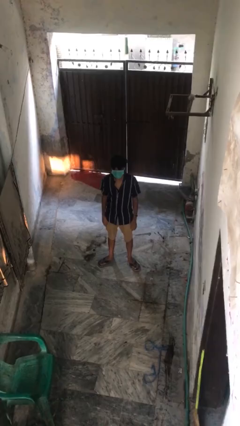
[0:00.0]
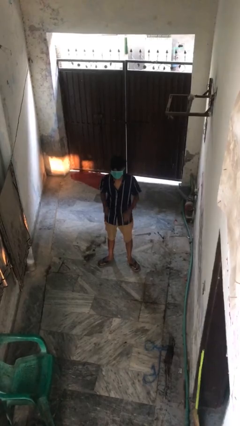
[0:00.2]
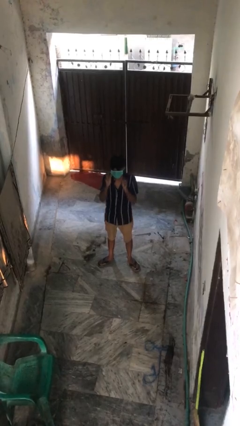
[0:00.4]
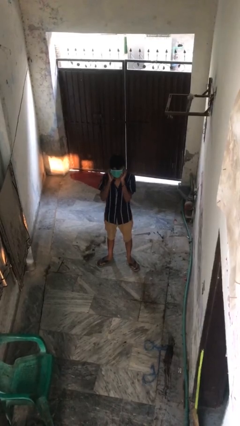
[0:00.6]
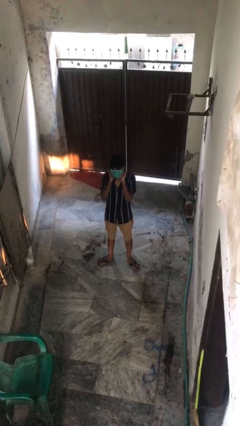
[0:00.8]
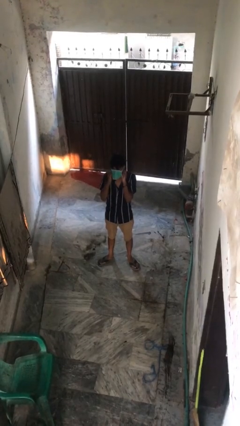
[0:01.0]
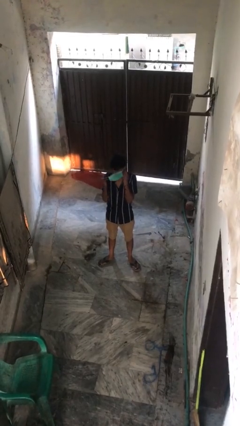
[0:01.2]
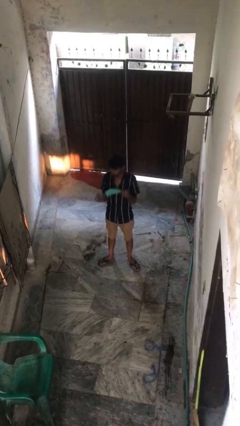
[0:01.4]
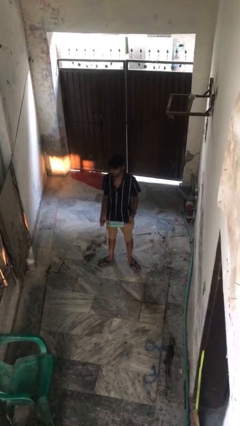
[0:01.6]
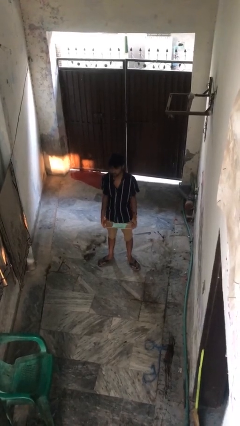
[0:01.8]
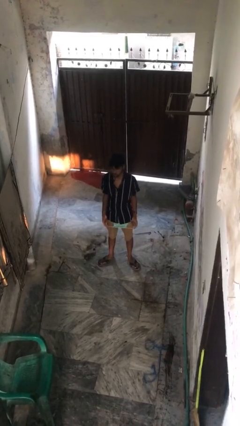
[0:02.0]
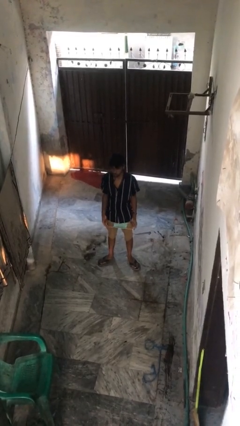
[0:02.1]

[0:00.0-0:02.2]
person takes off facemask

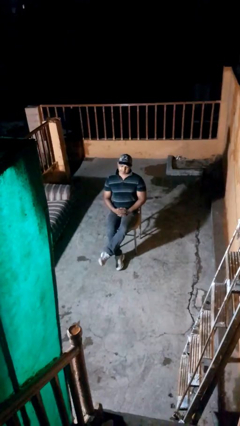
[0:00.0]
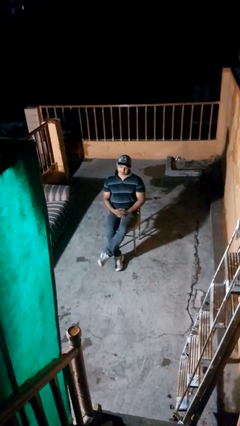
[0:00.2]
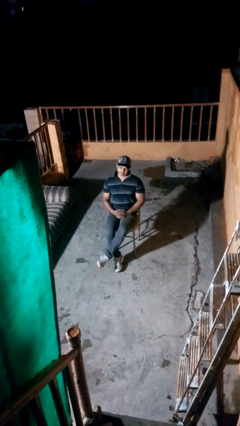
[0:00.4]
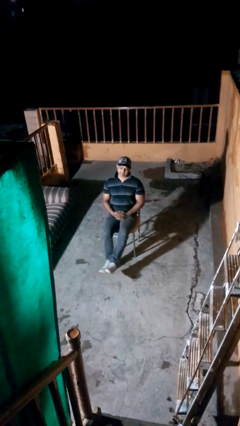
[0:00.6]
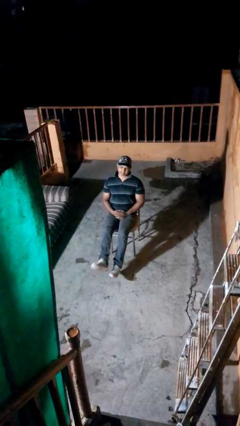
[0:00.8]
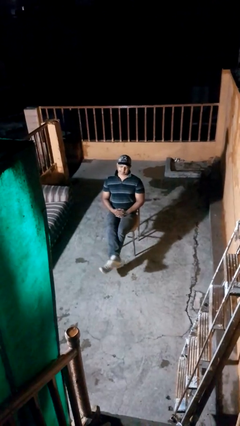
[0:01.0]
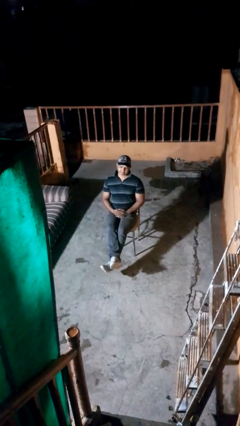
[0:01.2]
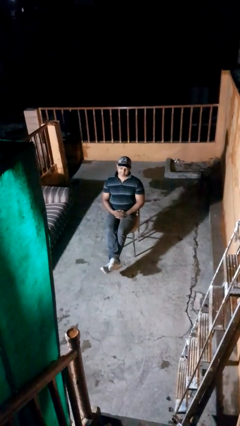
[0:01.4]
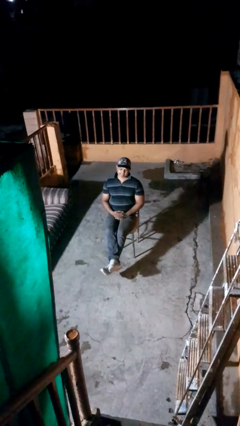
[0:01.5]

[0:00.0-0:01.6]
person crosses legs

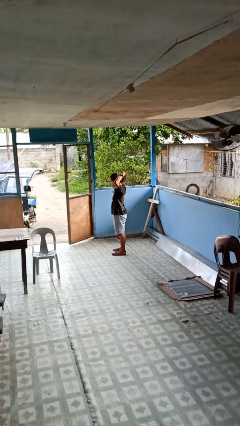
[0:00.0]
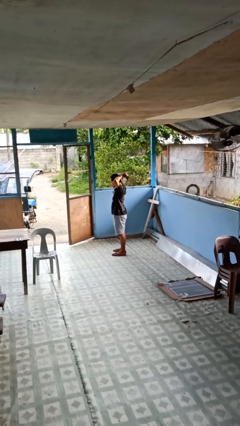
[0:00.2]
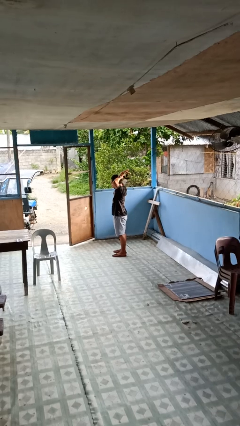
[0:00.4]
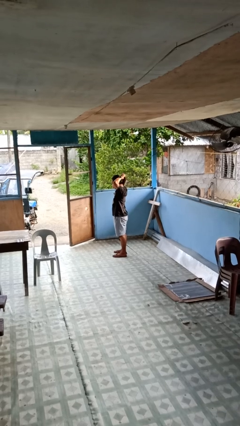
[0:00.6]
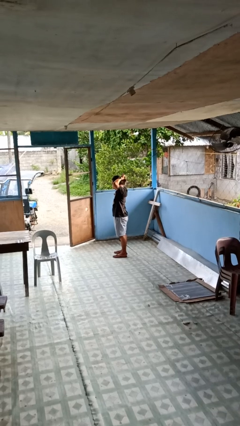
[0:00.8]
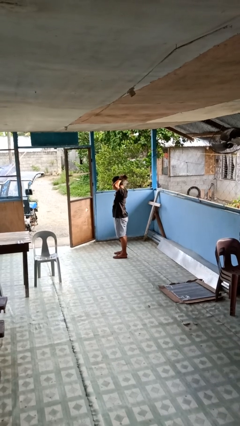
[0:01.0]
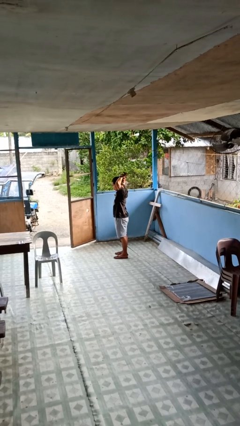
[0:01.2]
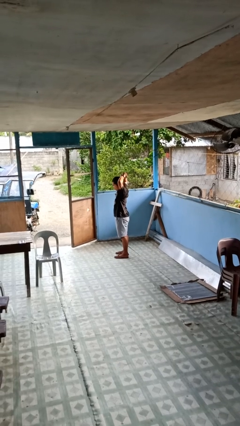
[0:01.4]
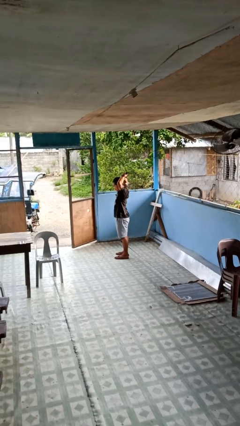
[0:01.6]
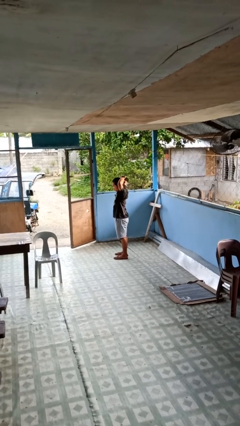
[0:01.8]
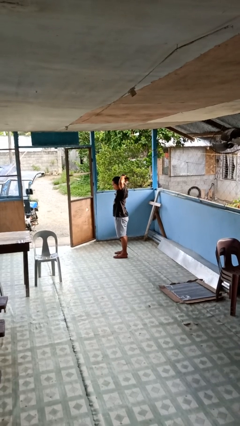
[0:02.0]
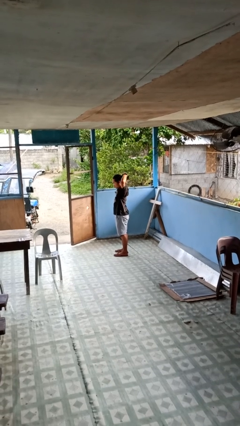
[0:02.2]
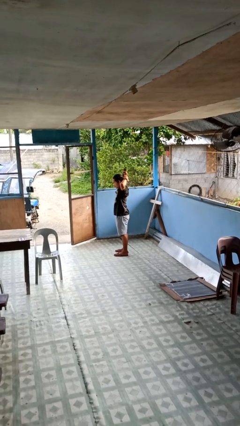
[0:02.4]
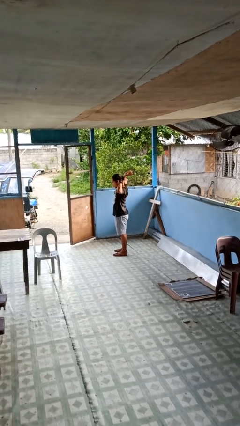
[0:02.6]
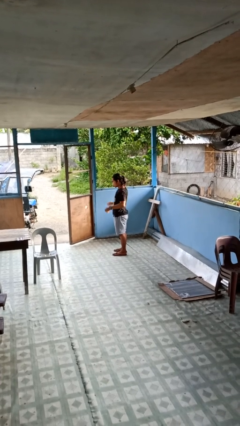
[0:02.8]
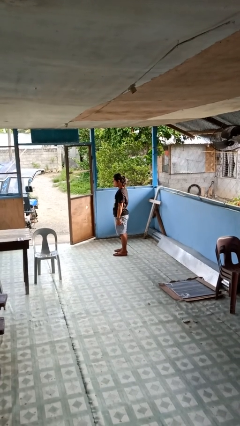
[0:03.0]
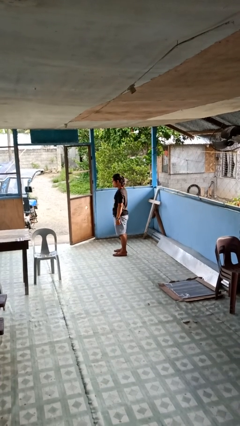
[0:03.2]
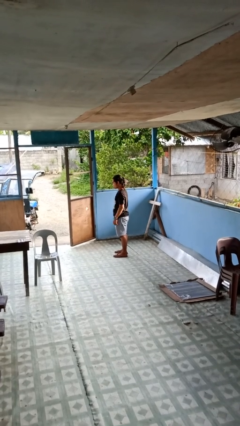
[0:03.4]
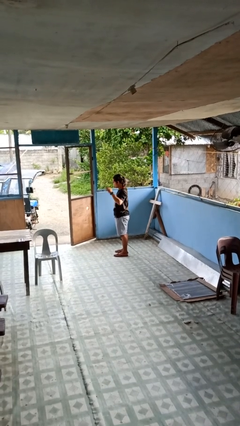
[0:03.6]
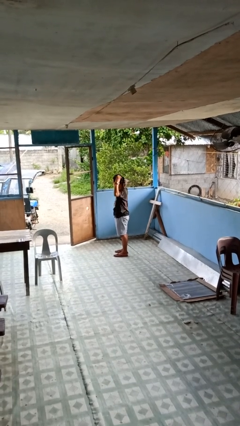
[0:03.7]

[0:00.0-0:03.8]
person puts hair in ponytail

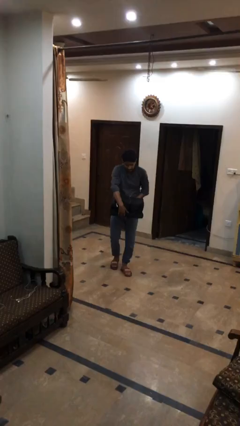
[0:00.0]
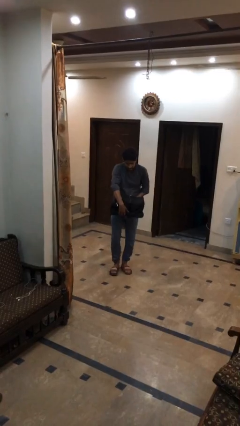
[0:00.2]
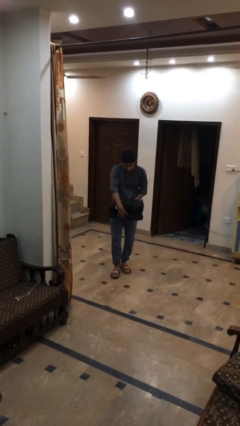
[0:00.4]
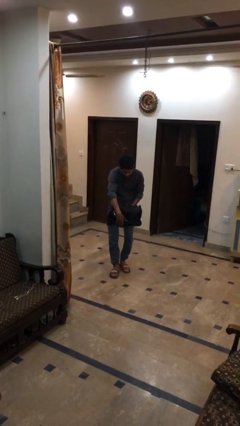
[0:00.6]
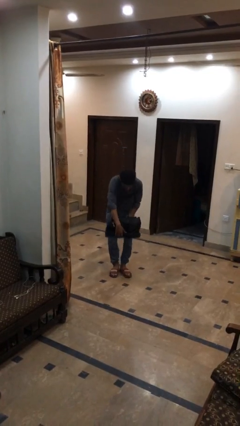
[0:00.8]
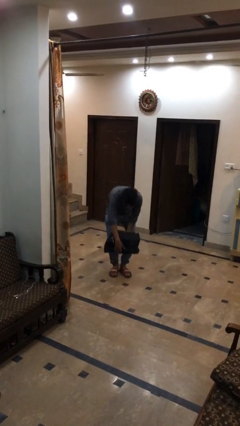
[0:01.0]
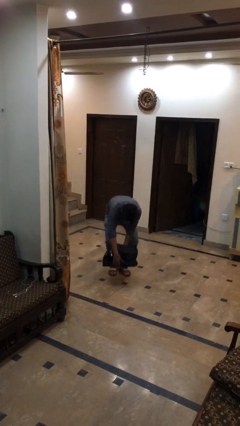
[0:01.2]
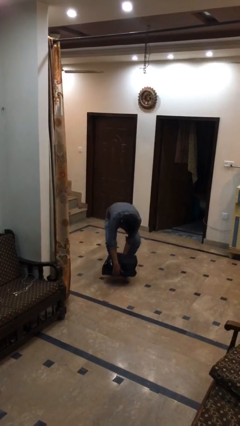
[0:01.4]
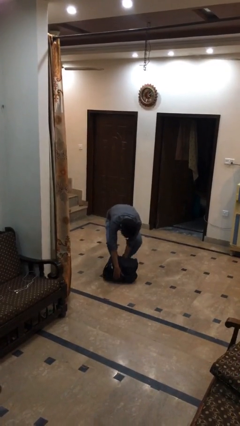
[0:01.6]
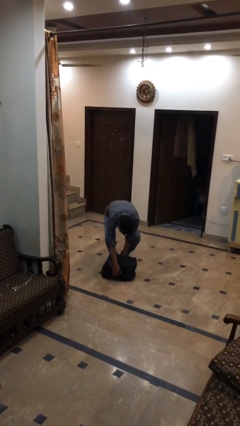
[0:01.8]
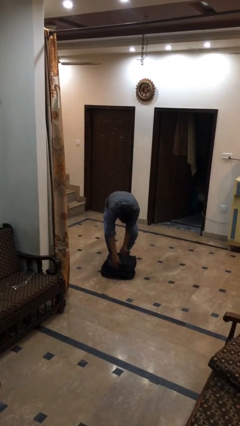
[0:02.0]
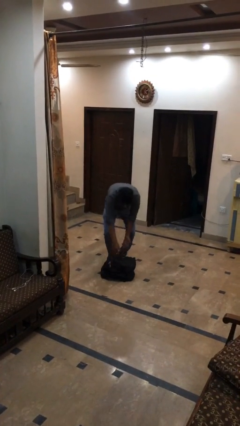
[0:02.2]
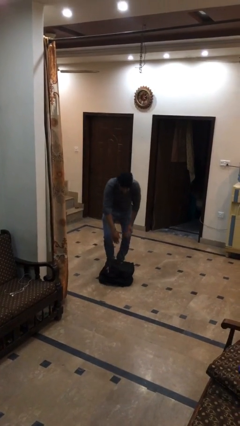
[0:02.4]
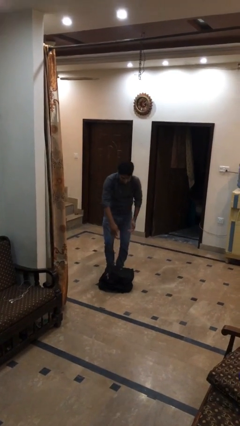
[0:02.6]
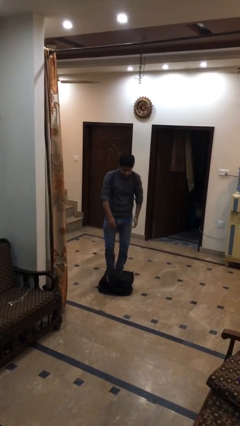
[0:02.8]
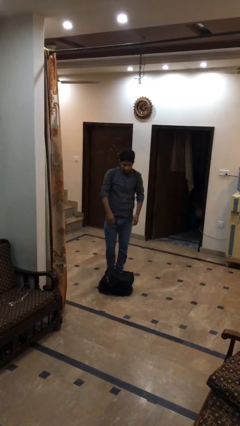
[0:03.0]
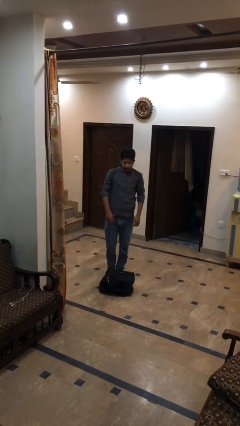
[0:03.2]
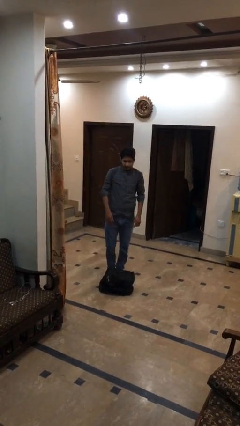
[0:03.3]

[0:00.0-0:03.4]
person puts down object on floor

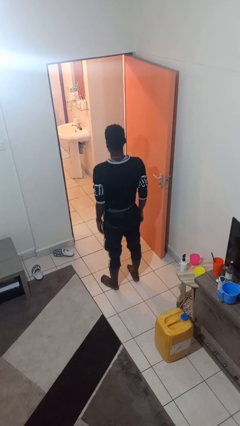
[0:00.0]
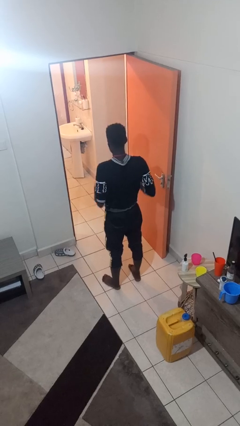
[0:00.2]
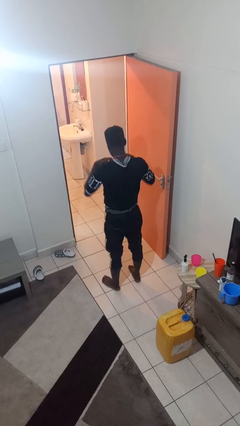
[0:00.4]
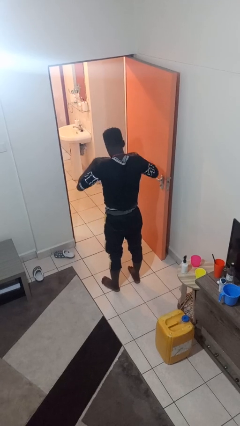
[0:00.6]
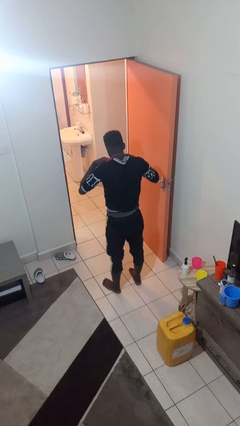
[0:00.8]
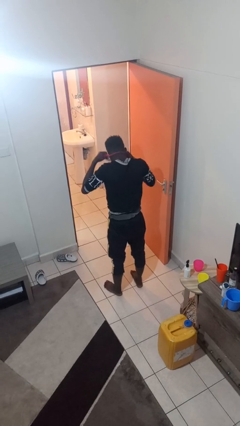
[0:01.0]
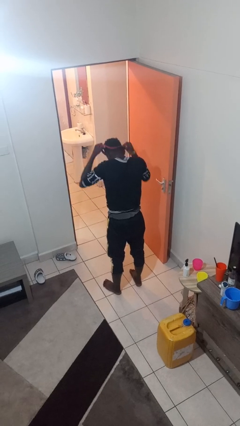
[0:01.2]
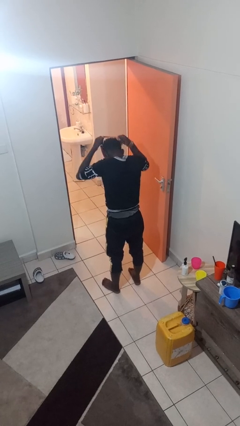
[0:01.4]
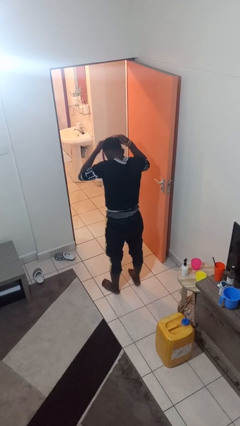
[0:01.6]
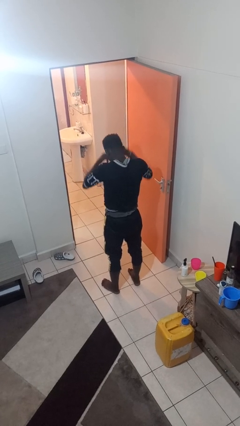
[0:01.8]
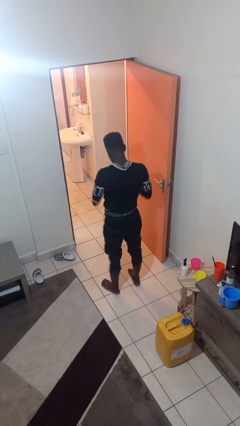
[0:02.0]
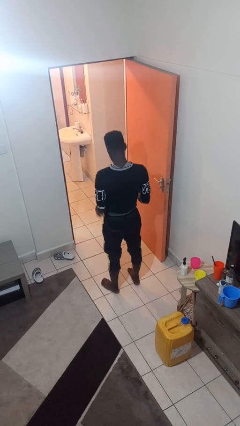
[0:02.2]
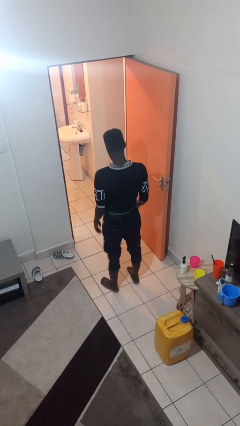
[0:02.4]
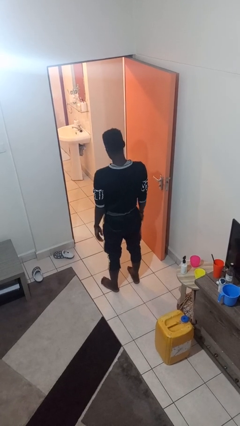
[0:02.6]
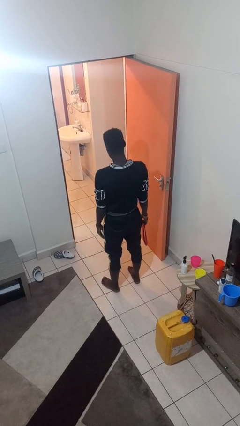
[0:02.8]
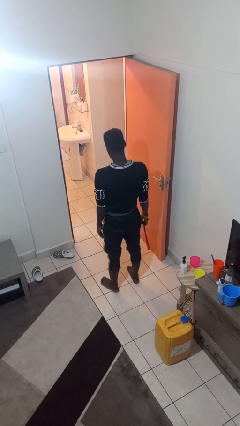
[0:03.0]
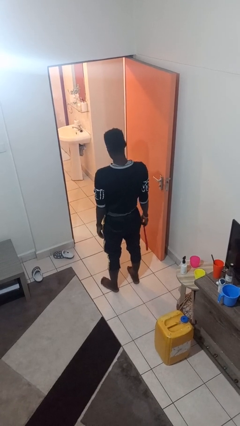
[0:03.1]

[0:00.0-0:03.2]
person takes off necklace

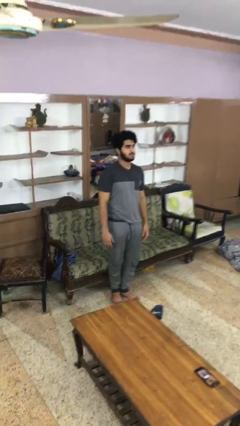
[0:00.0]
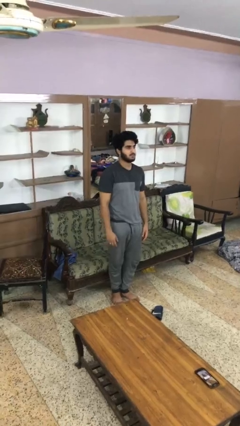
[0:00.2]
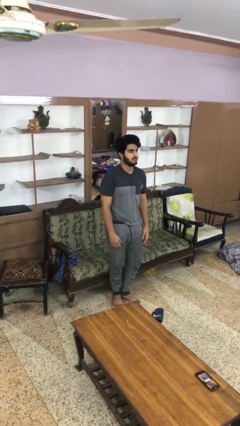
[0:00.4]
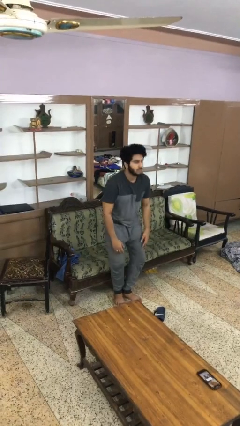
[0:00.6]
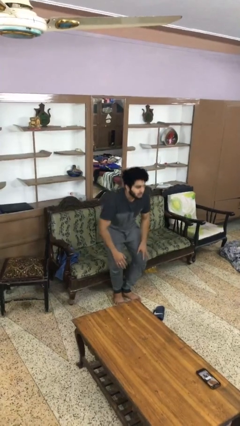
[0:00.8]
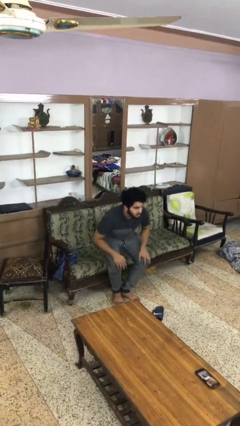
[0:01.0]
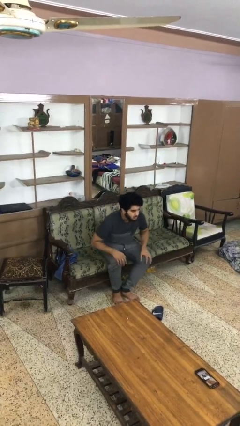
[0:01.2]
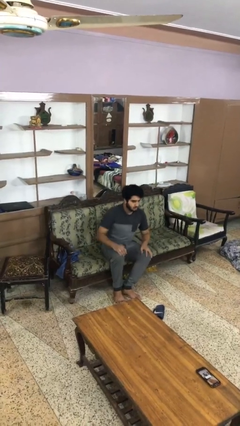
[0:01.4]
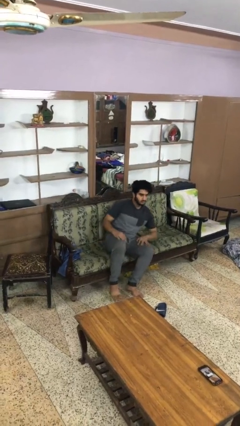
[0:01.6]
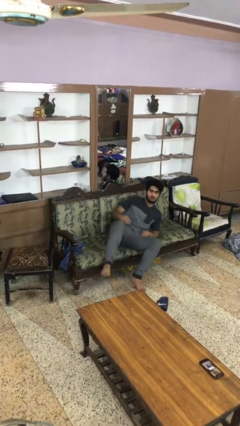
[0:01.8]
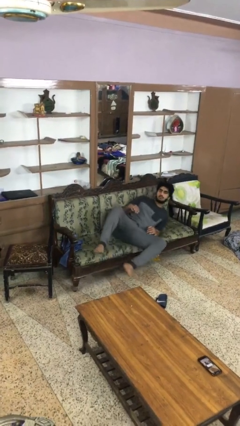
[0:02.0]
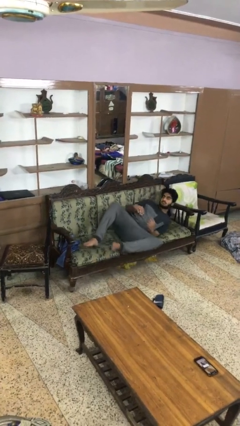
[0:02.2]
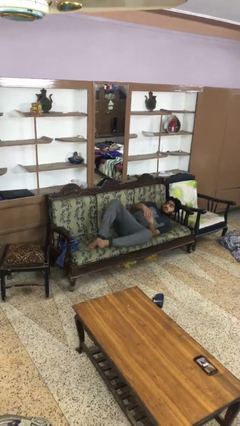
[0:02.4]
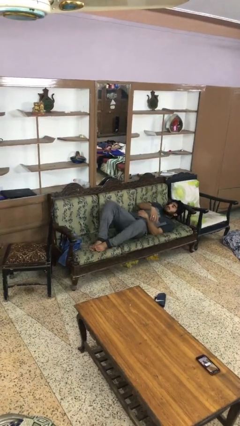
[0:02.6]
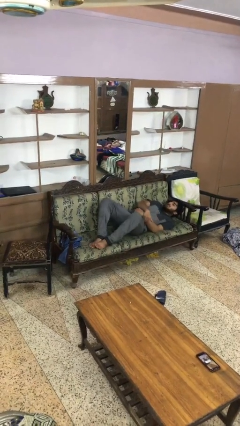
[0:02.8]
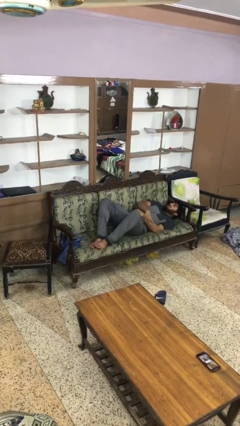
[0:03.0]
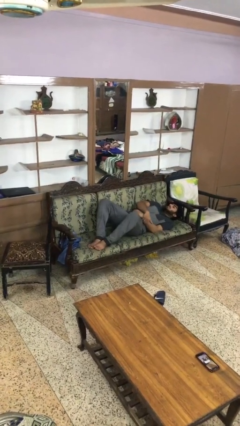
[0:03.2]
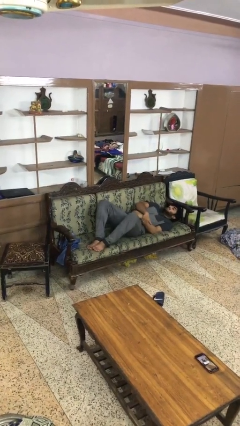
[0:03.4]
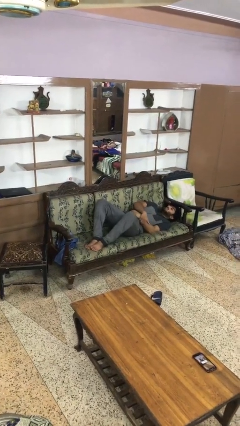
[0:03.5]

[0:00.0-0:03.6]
person lies down on couch
